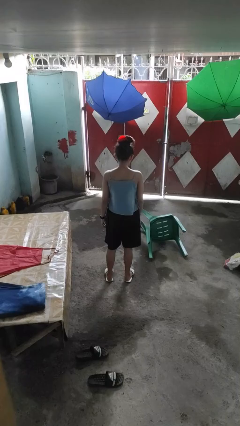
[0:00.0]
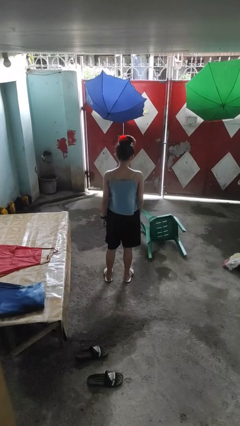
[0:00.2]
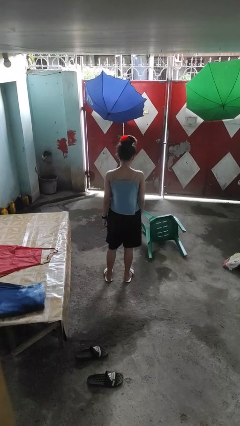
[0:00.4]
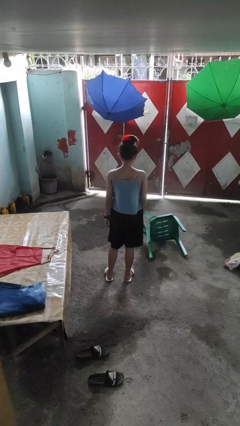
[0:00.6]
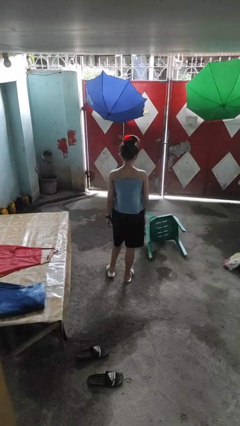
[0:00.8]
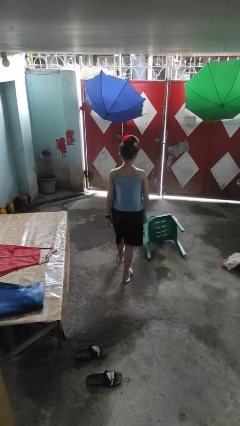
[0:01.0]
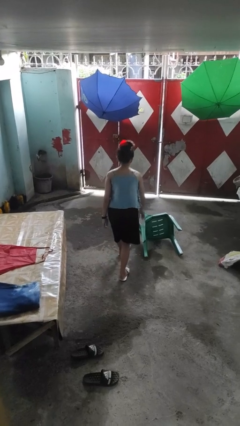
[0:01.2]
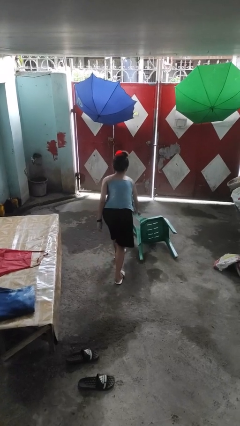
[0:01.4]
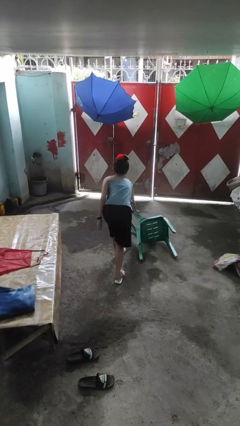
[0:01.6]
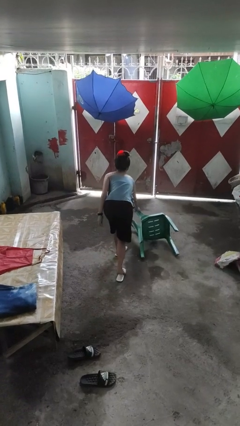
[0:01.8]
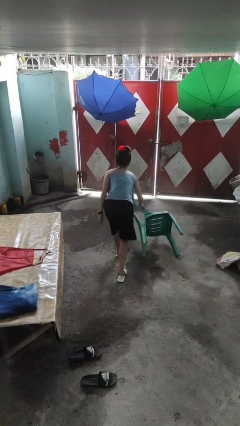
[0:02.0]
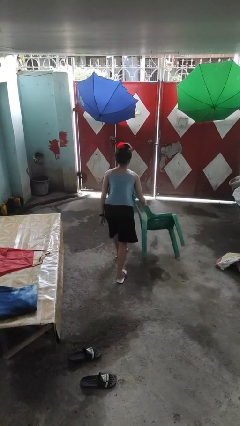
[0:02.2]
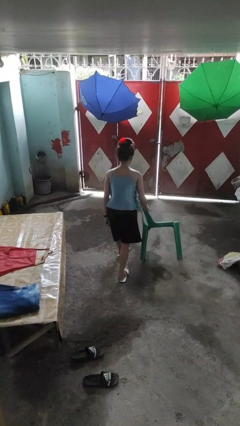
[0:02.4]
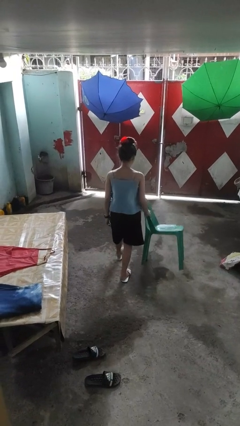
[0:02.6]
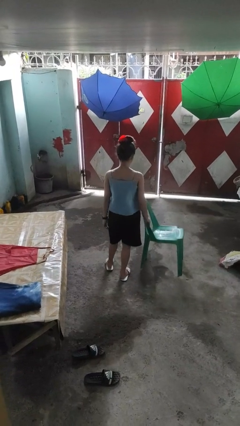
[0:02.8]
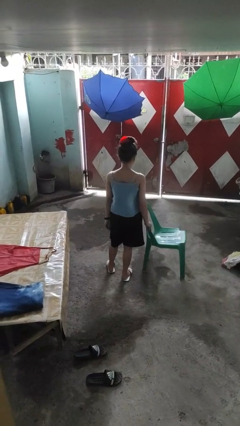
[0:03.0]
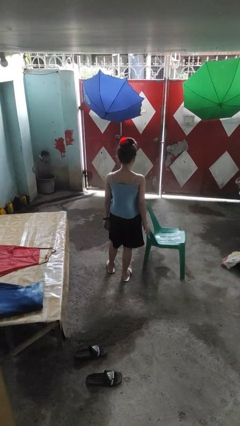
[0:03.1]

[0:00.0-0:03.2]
person sets upright furniture

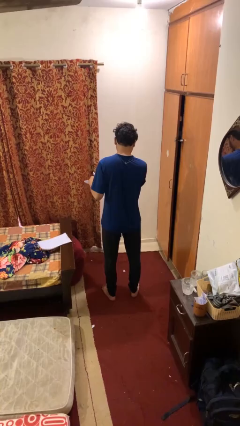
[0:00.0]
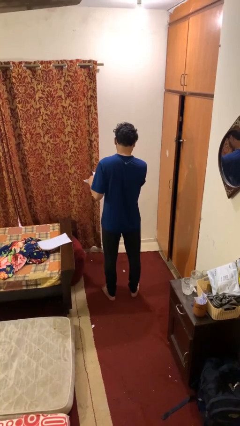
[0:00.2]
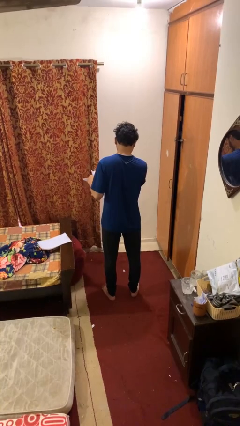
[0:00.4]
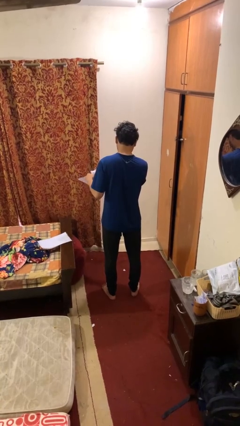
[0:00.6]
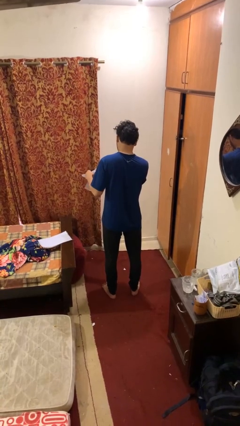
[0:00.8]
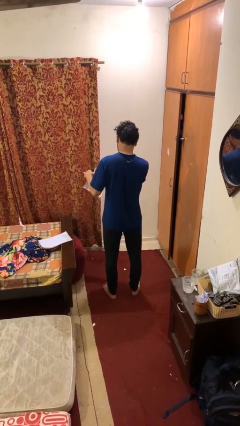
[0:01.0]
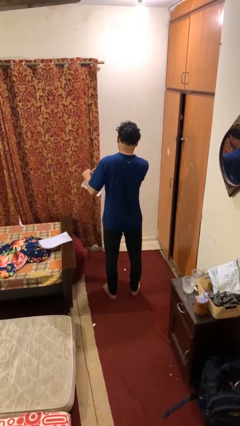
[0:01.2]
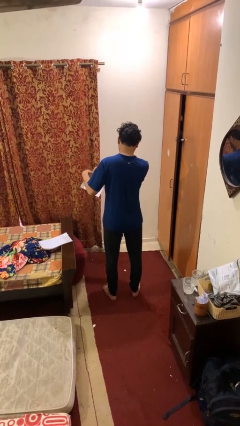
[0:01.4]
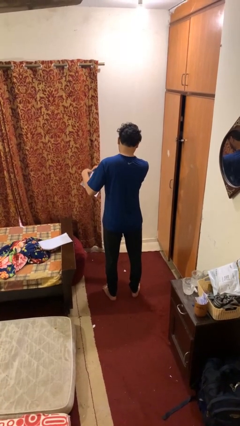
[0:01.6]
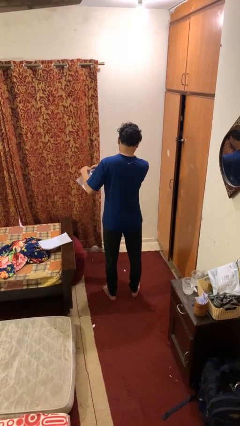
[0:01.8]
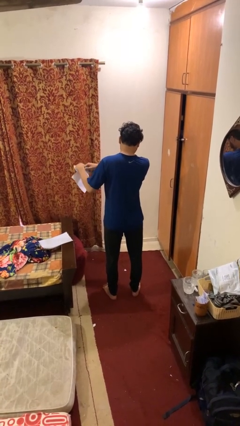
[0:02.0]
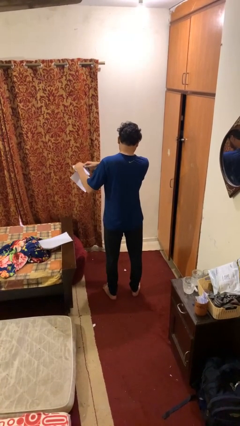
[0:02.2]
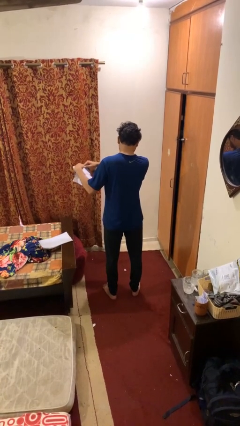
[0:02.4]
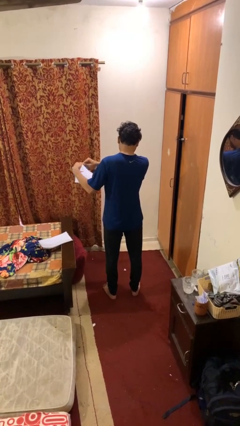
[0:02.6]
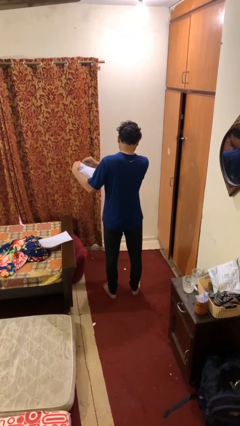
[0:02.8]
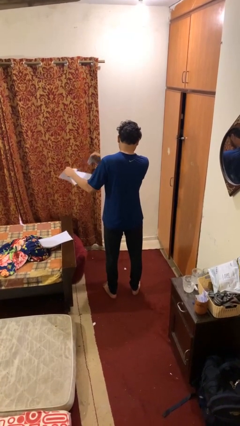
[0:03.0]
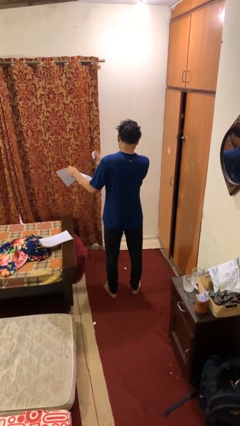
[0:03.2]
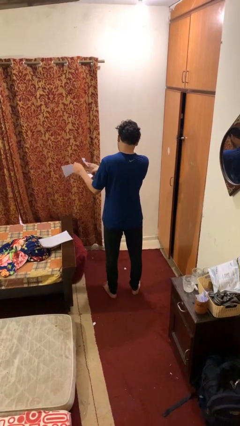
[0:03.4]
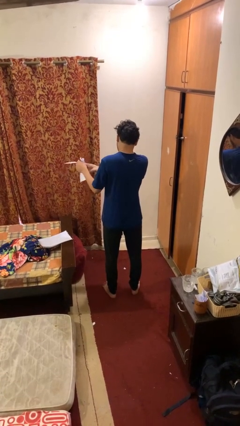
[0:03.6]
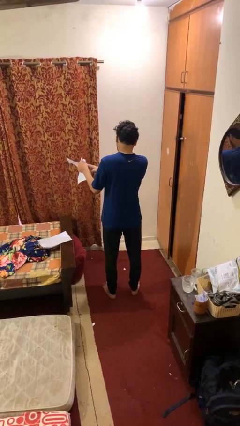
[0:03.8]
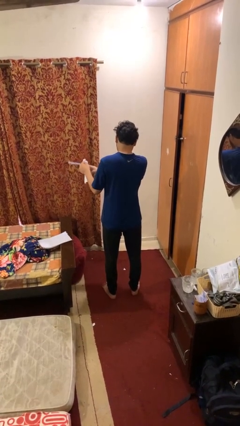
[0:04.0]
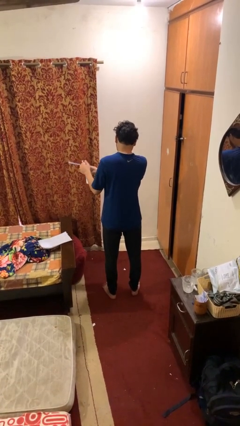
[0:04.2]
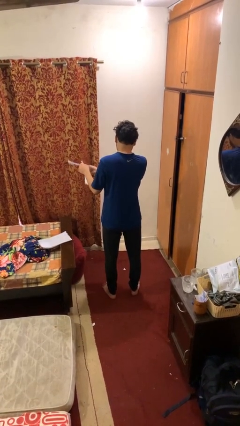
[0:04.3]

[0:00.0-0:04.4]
person tears paper

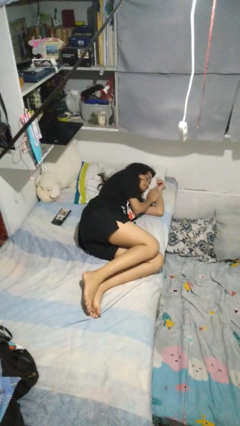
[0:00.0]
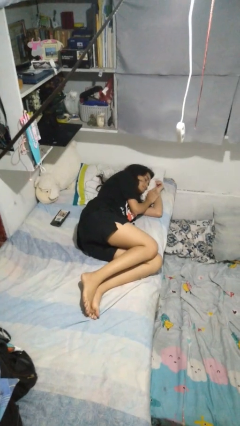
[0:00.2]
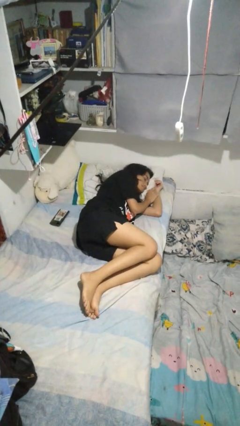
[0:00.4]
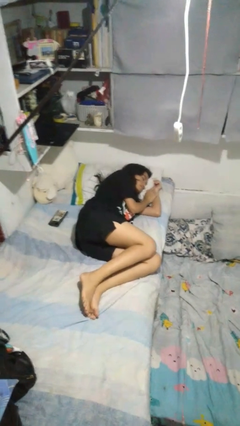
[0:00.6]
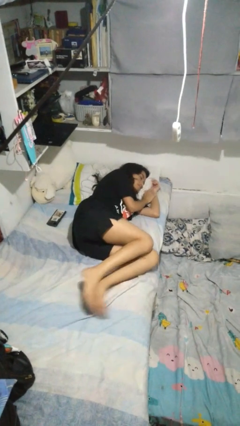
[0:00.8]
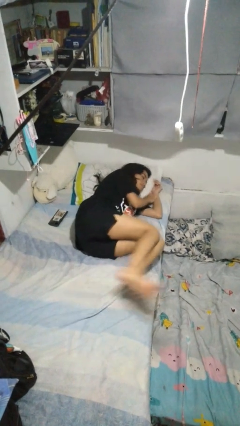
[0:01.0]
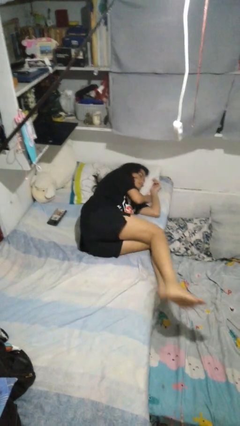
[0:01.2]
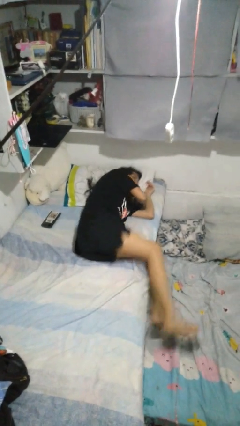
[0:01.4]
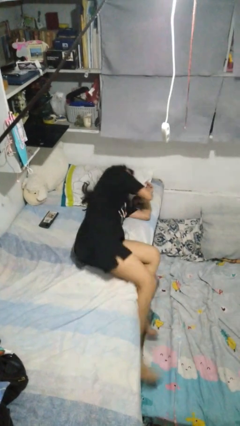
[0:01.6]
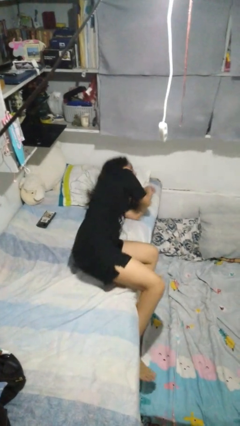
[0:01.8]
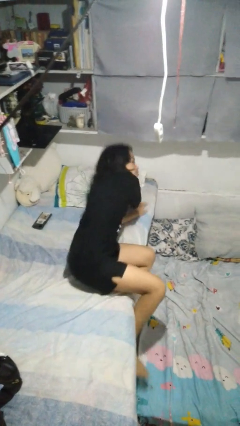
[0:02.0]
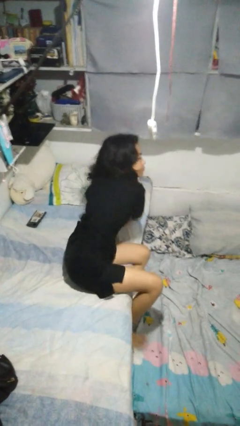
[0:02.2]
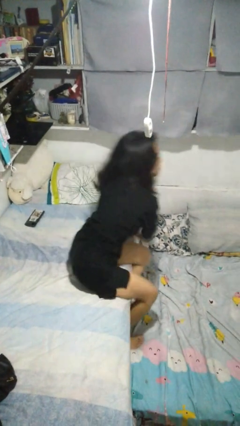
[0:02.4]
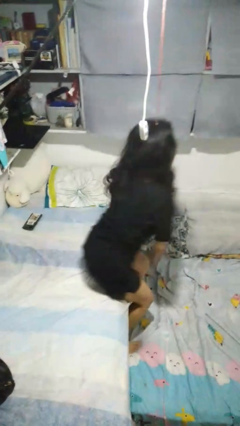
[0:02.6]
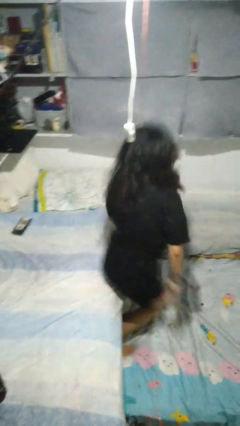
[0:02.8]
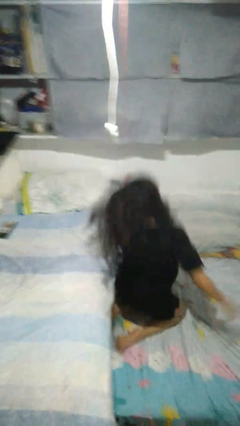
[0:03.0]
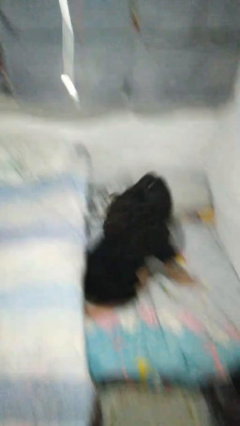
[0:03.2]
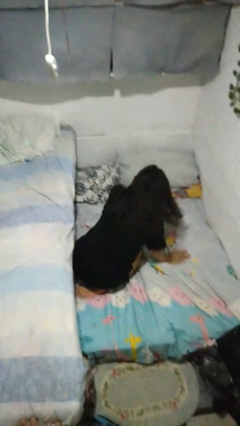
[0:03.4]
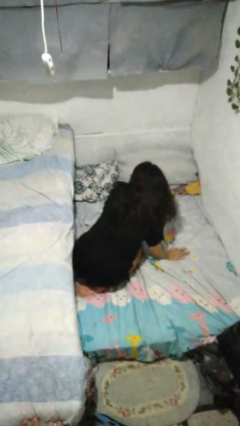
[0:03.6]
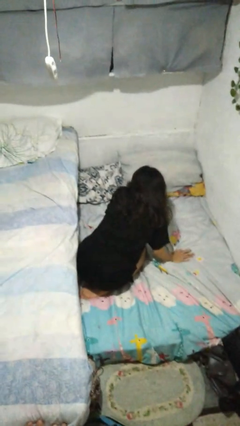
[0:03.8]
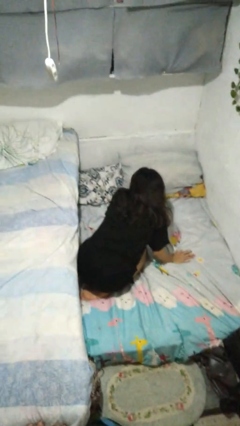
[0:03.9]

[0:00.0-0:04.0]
person falls from bed

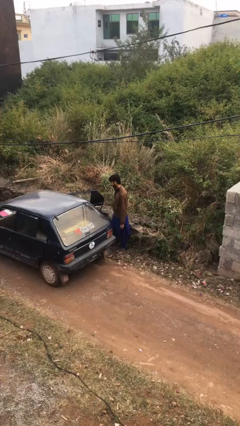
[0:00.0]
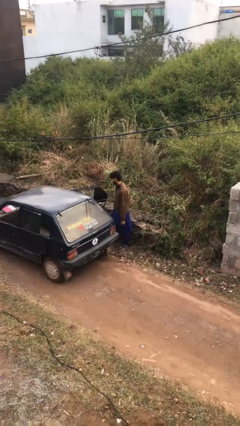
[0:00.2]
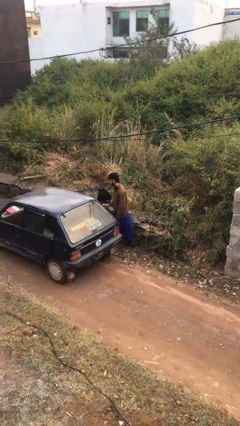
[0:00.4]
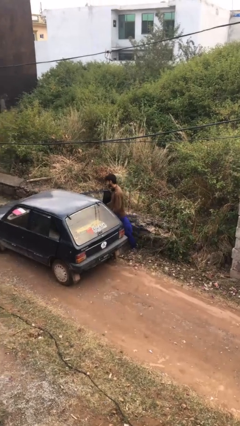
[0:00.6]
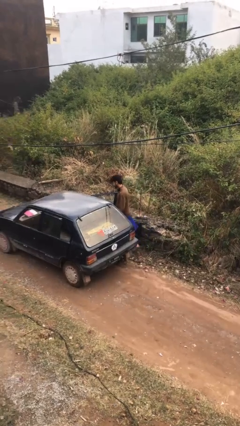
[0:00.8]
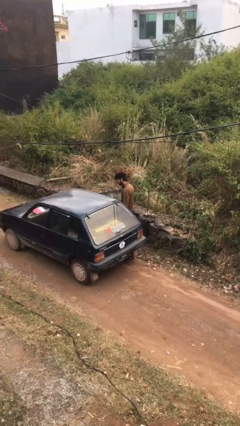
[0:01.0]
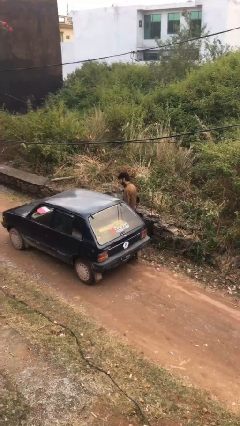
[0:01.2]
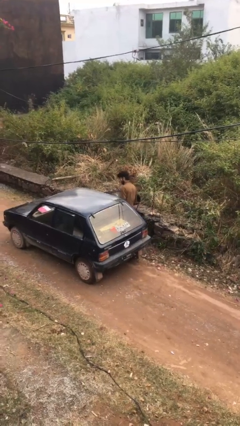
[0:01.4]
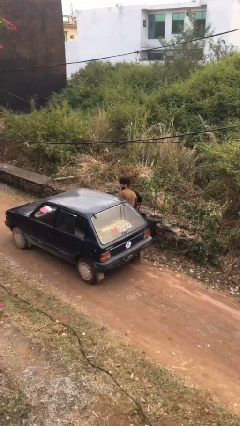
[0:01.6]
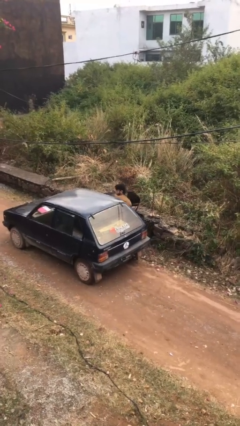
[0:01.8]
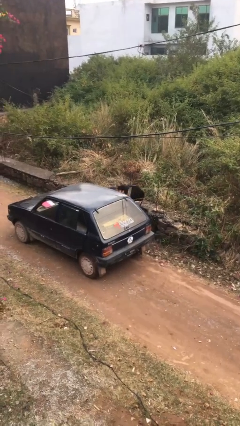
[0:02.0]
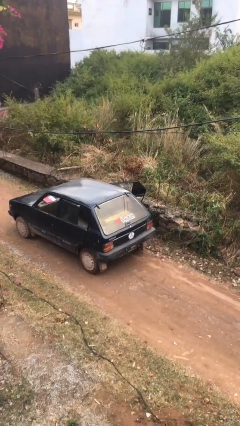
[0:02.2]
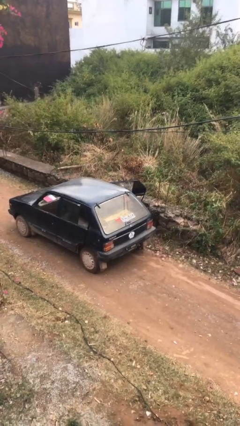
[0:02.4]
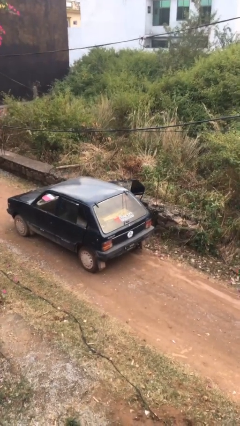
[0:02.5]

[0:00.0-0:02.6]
person enters car

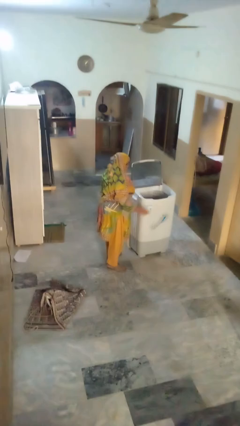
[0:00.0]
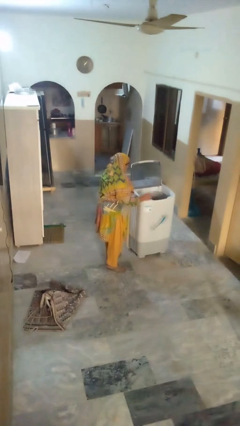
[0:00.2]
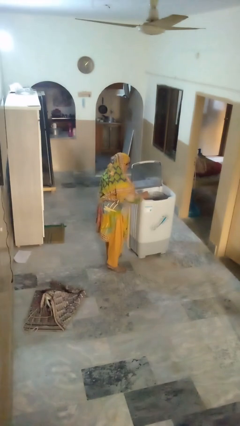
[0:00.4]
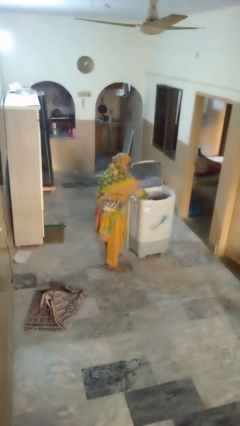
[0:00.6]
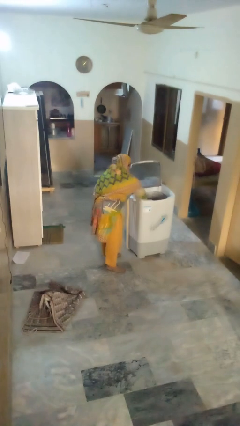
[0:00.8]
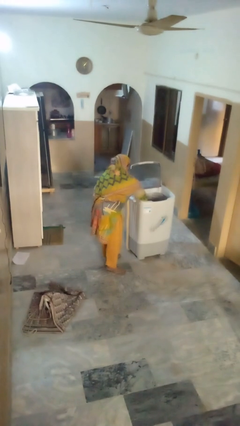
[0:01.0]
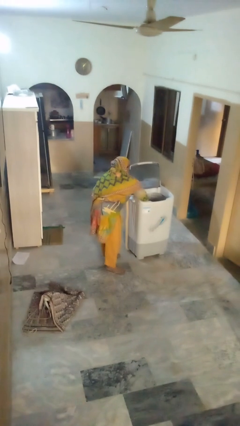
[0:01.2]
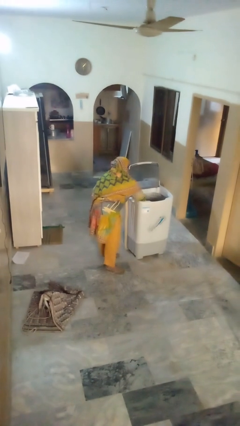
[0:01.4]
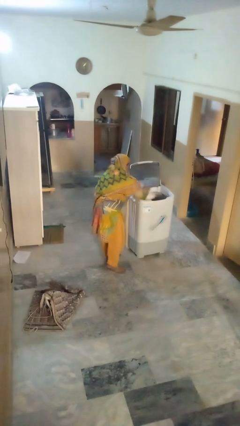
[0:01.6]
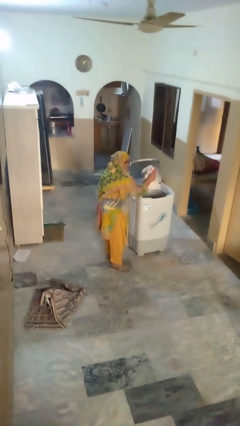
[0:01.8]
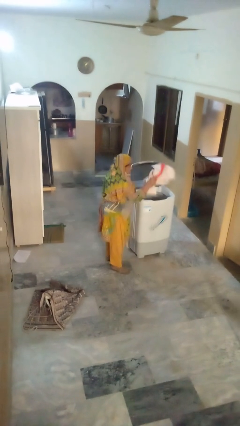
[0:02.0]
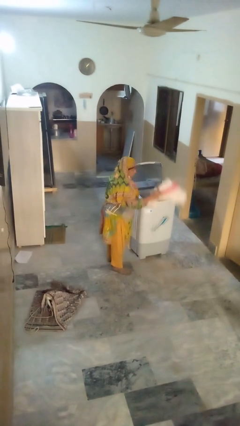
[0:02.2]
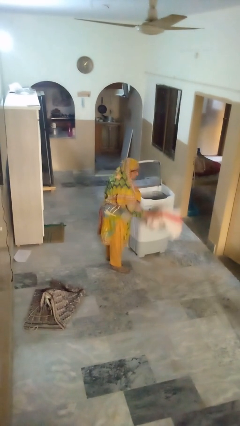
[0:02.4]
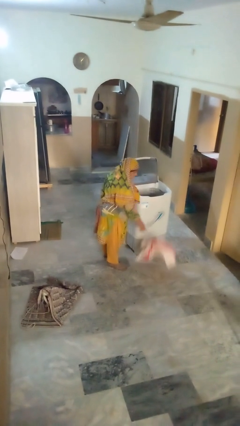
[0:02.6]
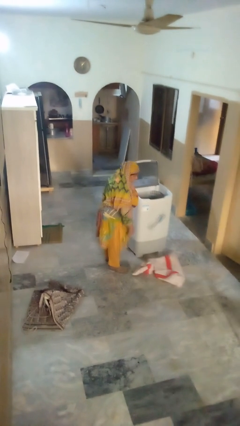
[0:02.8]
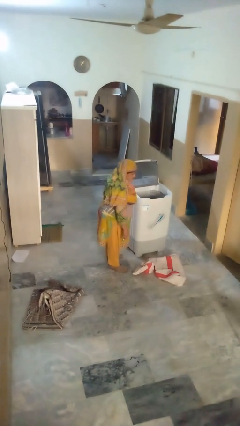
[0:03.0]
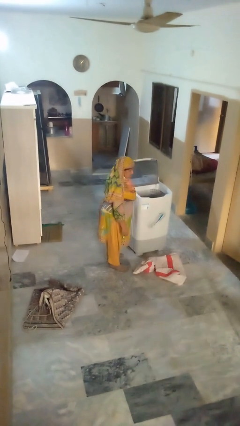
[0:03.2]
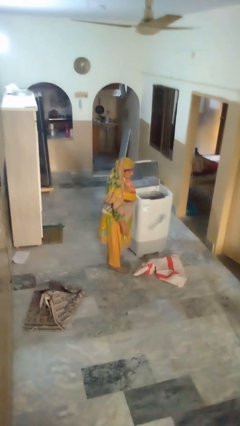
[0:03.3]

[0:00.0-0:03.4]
person unloads clotheswasher

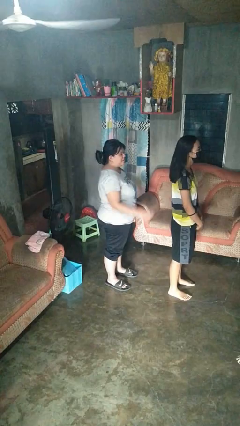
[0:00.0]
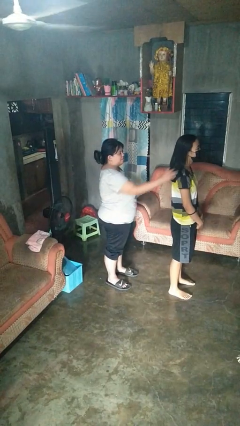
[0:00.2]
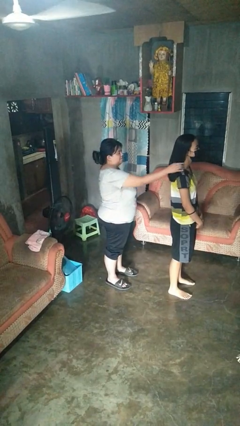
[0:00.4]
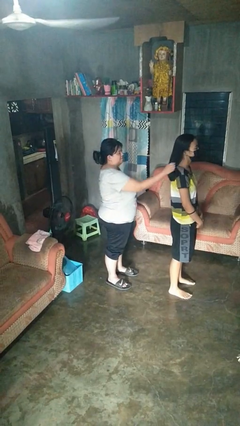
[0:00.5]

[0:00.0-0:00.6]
person grabs person by hair
